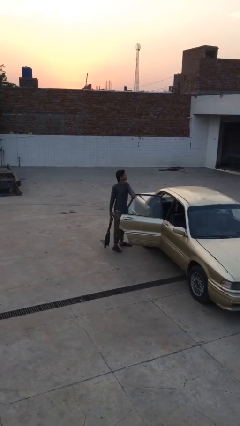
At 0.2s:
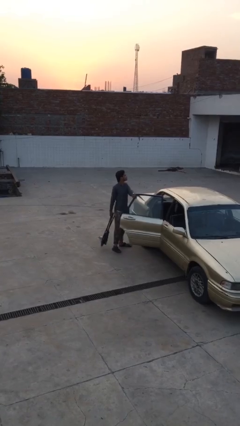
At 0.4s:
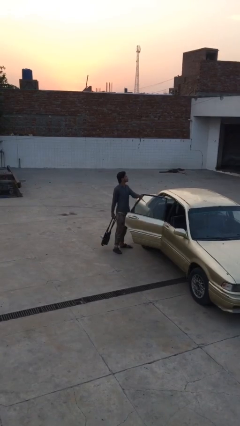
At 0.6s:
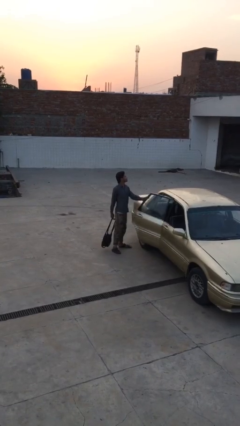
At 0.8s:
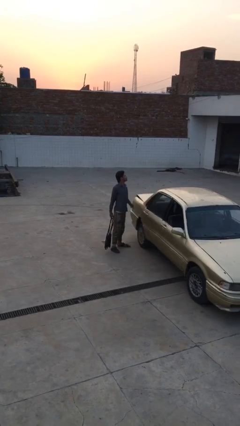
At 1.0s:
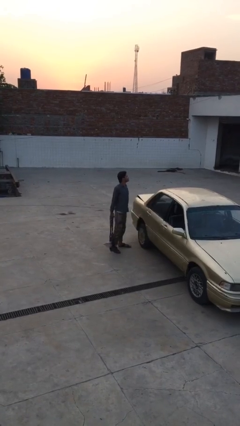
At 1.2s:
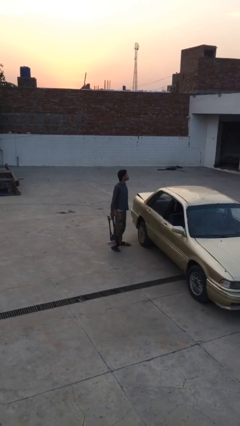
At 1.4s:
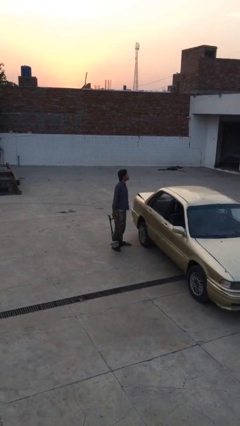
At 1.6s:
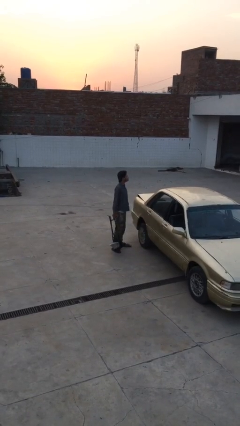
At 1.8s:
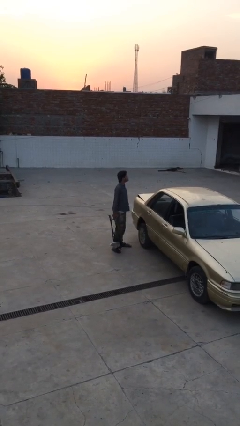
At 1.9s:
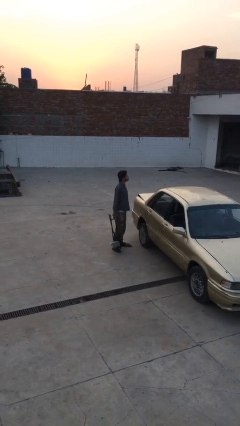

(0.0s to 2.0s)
person closes car door

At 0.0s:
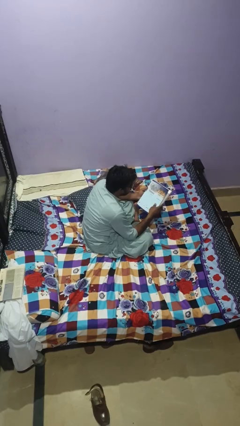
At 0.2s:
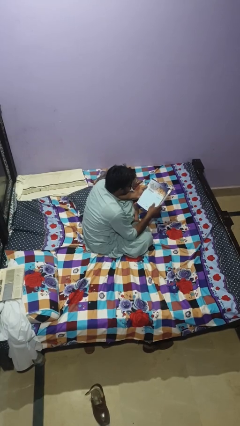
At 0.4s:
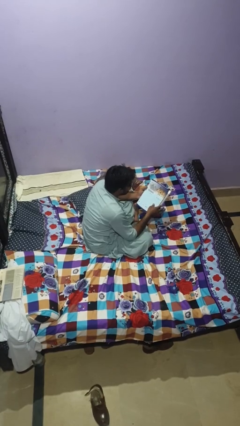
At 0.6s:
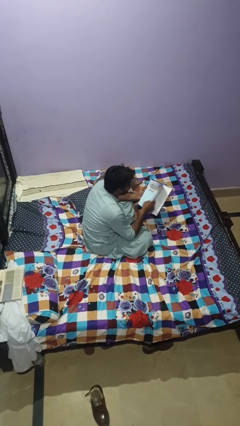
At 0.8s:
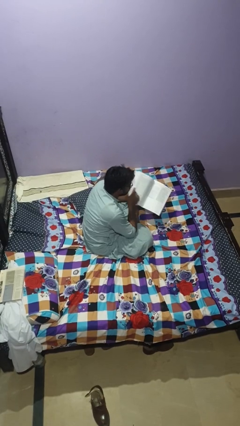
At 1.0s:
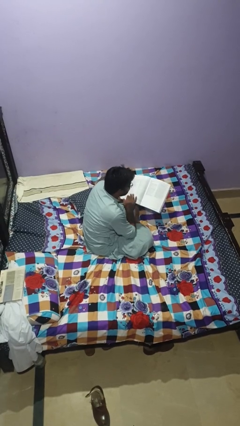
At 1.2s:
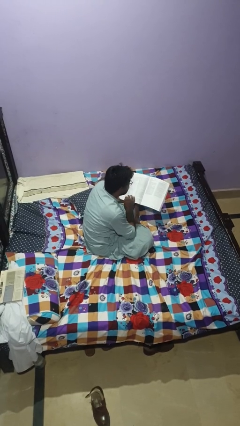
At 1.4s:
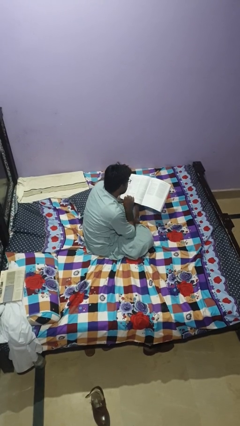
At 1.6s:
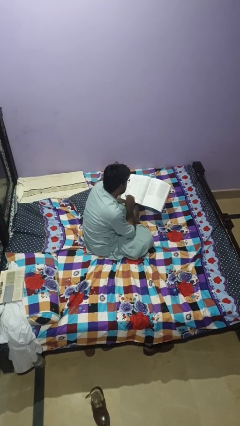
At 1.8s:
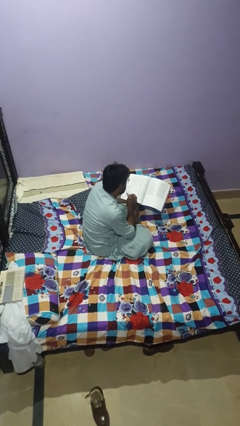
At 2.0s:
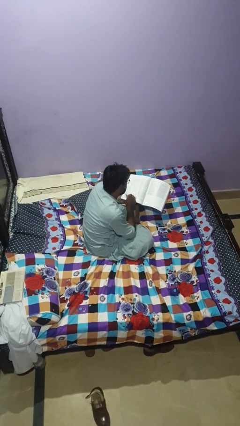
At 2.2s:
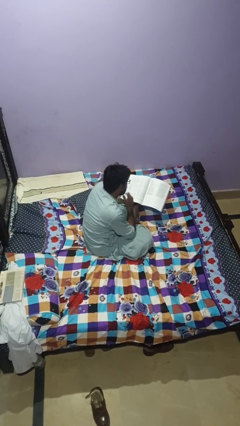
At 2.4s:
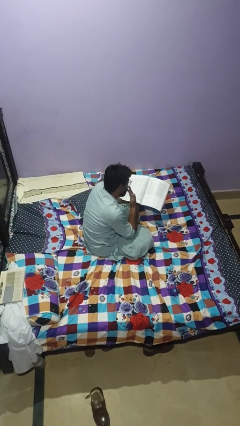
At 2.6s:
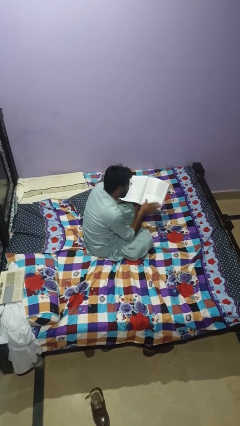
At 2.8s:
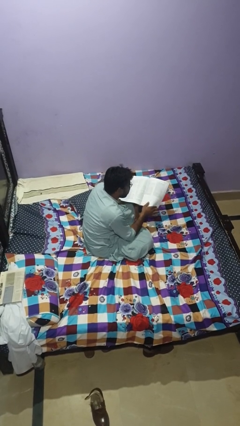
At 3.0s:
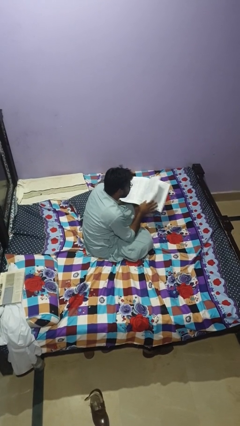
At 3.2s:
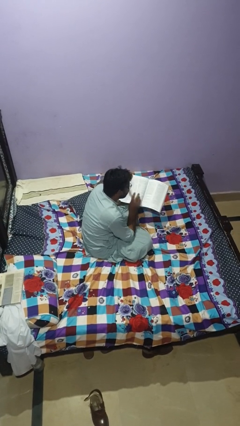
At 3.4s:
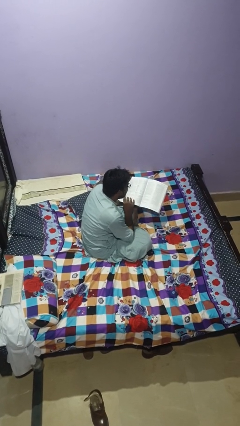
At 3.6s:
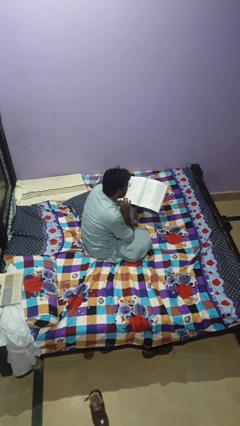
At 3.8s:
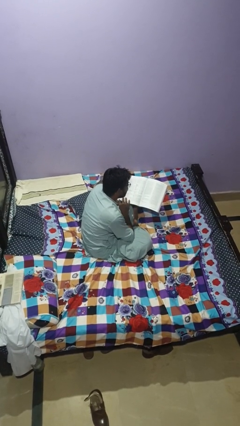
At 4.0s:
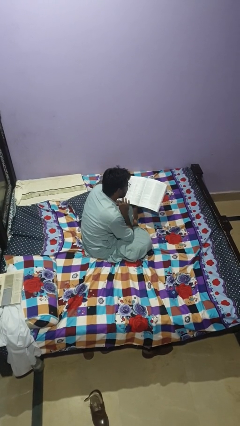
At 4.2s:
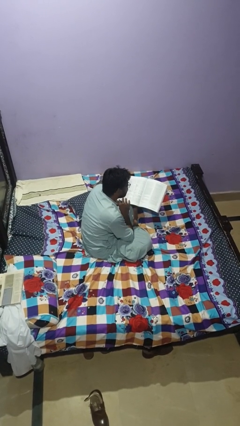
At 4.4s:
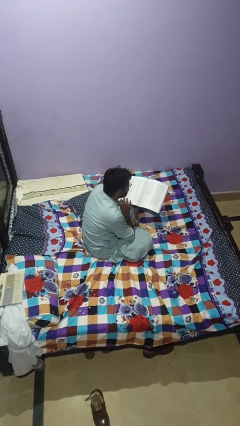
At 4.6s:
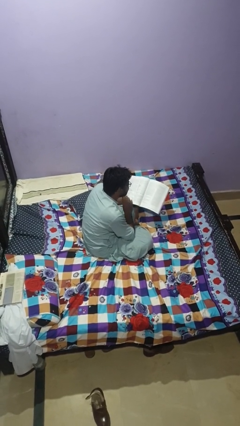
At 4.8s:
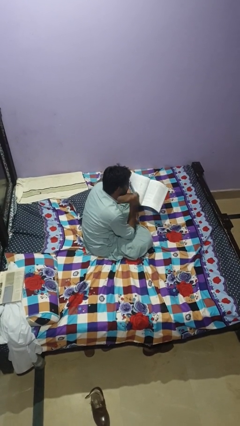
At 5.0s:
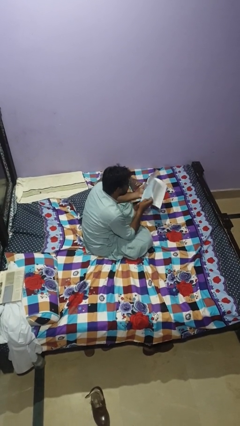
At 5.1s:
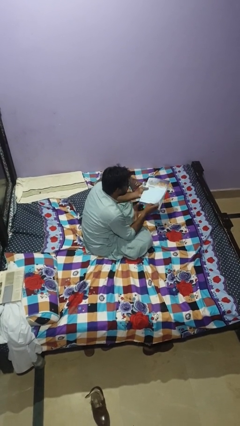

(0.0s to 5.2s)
person reads magazine

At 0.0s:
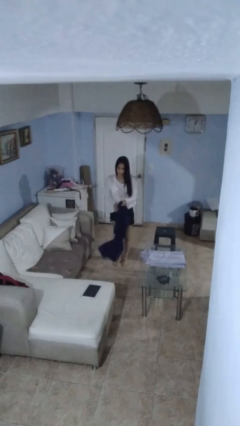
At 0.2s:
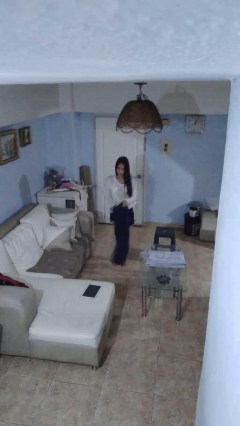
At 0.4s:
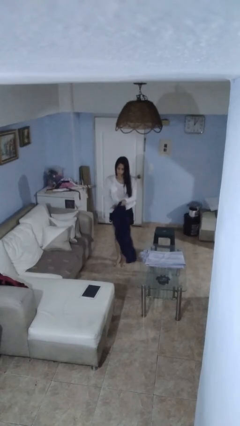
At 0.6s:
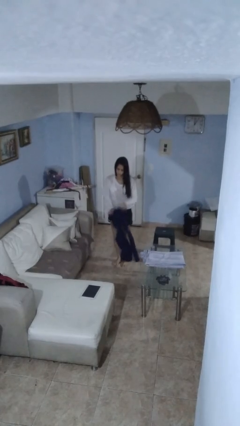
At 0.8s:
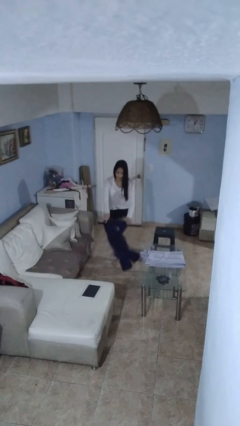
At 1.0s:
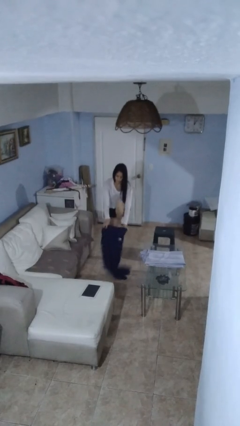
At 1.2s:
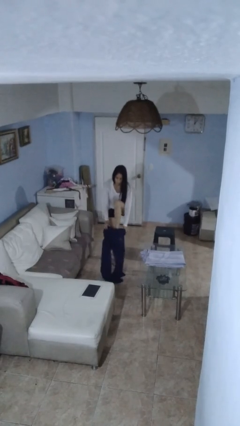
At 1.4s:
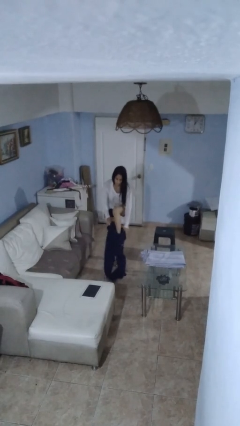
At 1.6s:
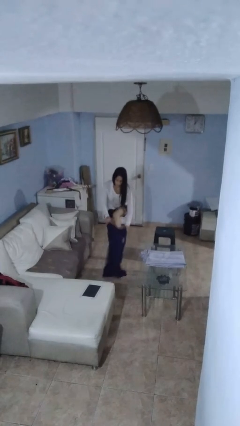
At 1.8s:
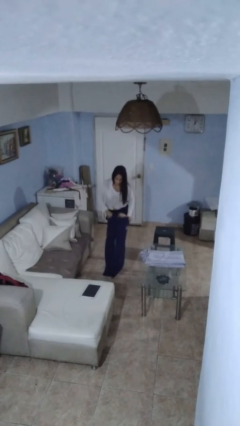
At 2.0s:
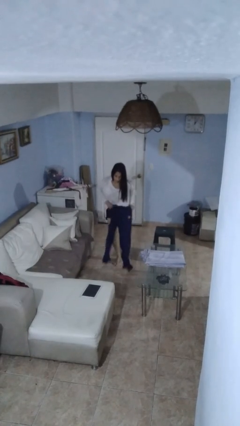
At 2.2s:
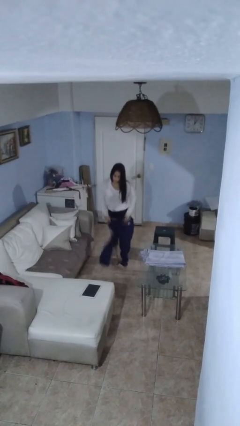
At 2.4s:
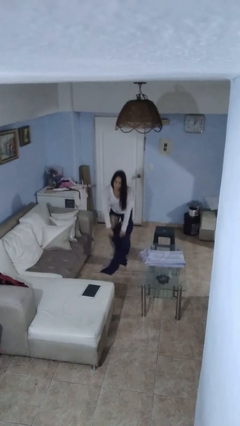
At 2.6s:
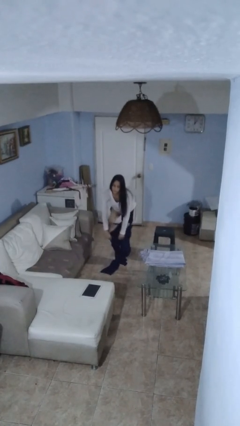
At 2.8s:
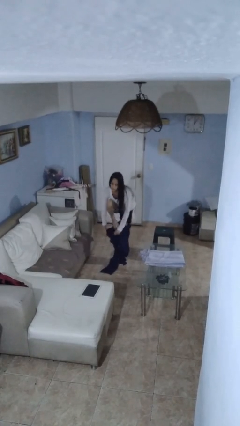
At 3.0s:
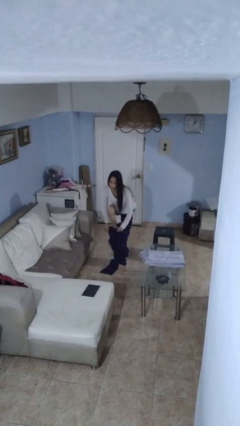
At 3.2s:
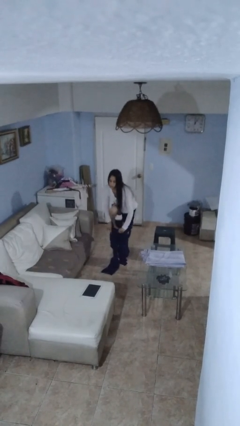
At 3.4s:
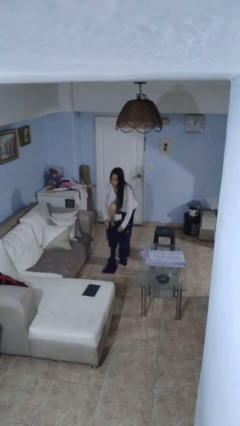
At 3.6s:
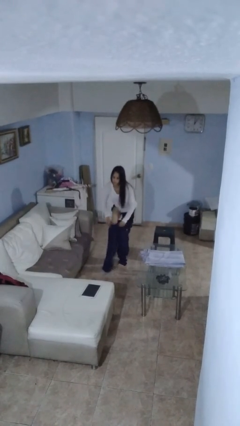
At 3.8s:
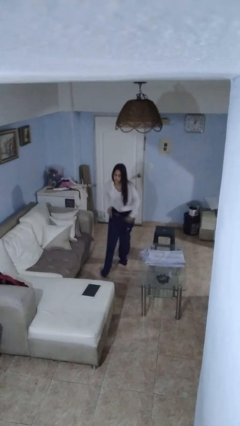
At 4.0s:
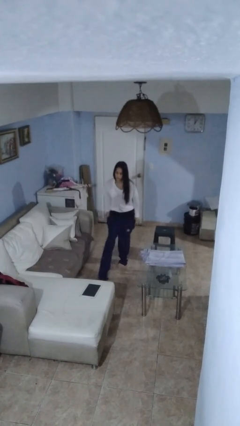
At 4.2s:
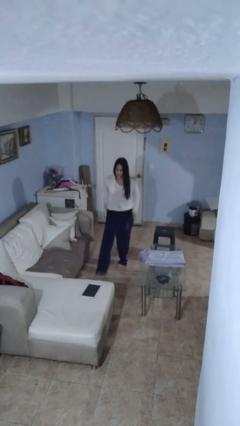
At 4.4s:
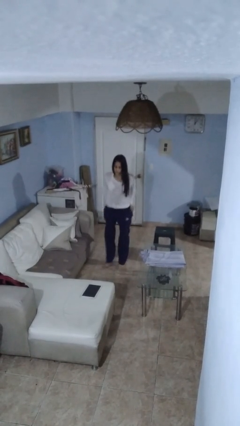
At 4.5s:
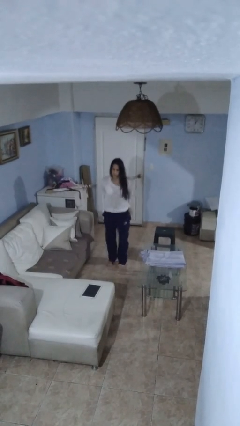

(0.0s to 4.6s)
person puts on pants

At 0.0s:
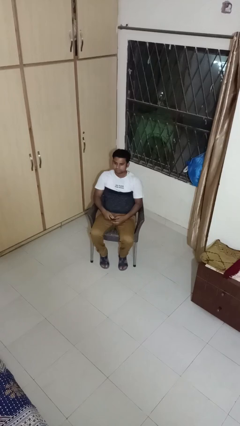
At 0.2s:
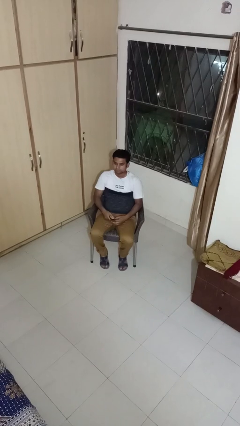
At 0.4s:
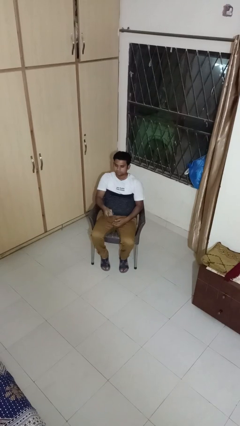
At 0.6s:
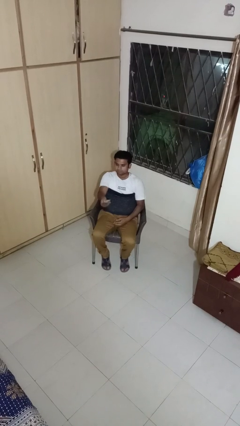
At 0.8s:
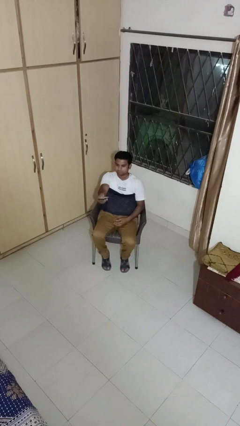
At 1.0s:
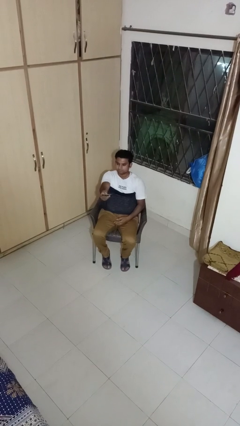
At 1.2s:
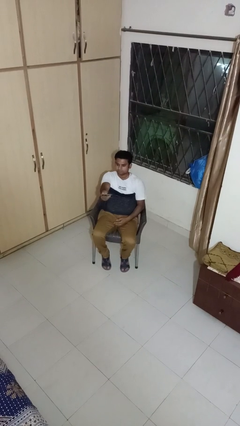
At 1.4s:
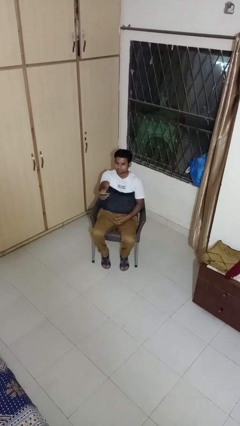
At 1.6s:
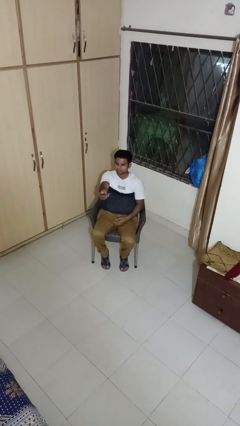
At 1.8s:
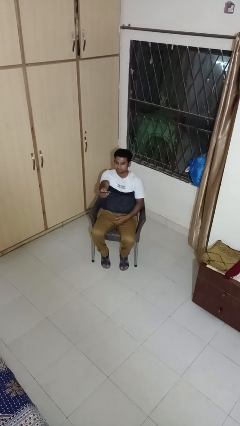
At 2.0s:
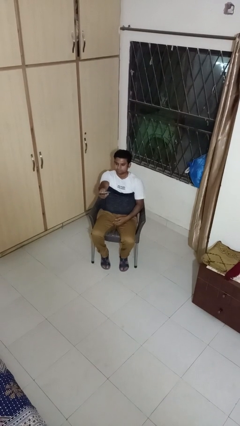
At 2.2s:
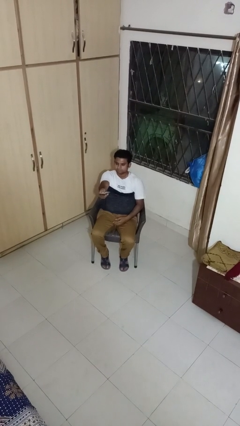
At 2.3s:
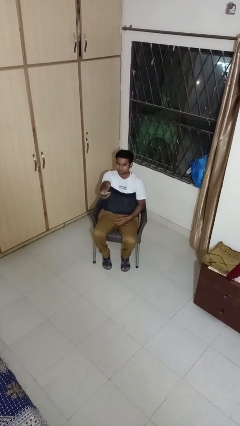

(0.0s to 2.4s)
person uses television remote

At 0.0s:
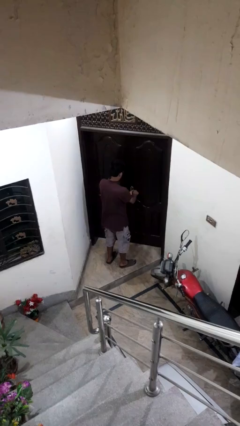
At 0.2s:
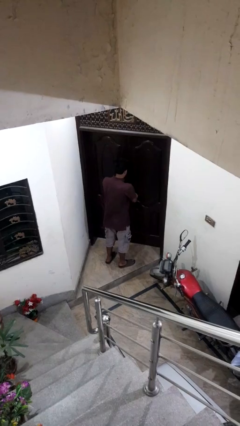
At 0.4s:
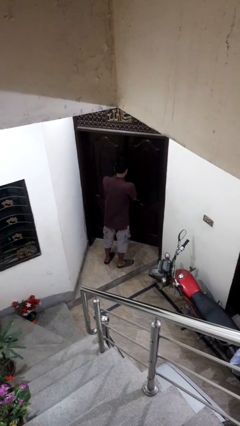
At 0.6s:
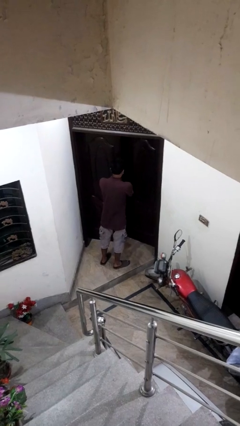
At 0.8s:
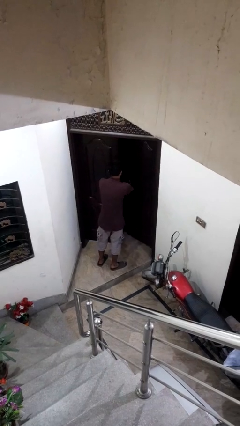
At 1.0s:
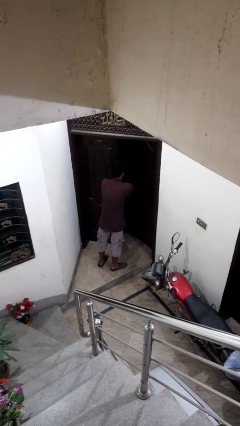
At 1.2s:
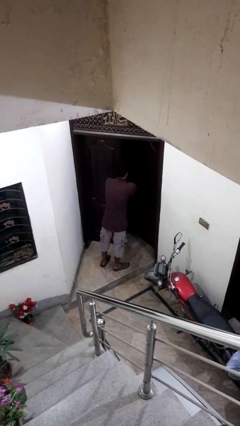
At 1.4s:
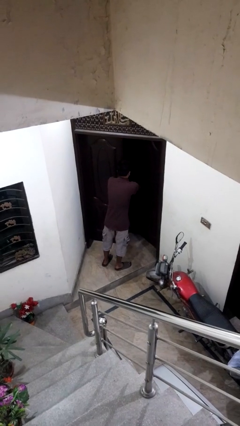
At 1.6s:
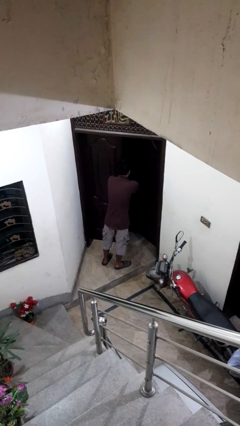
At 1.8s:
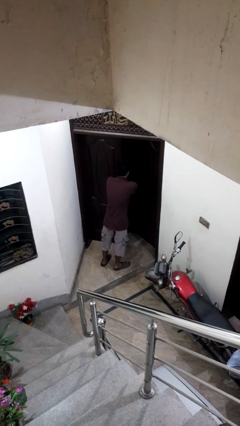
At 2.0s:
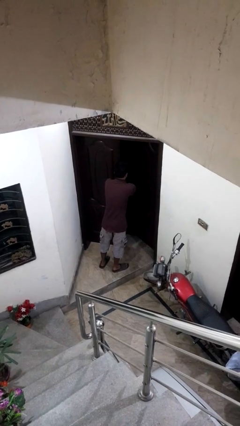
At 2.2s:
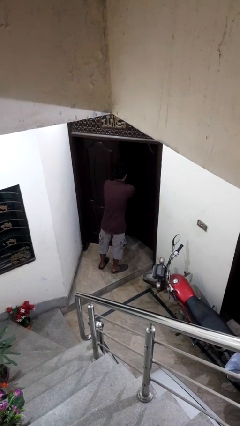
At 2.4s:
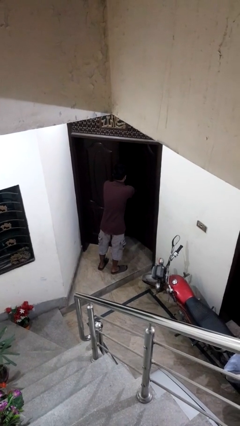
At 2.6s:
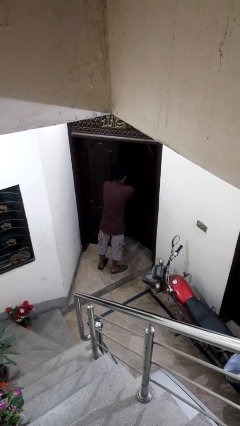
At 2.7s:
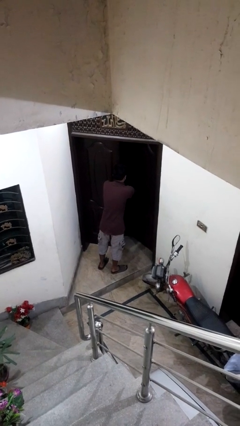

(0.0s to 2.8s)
person opens facility door

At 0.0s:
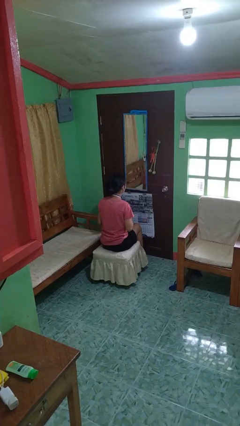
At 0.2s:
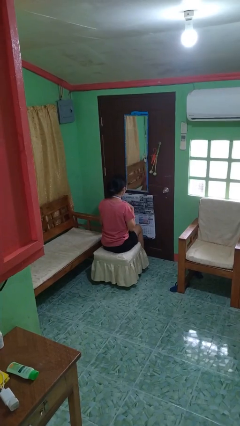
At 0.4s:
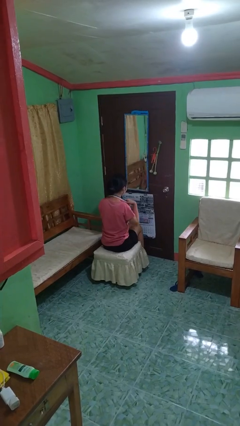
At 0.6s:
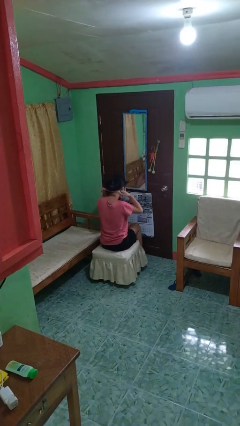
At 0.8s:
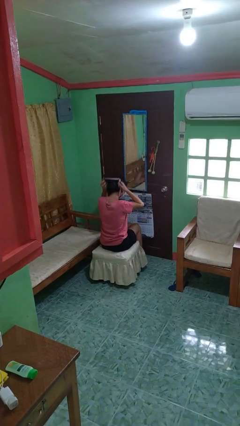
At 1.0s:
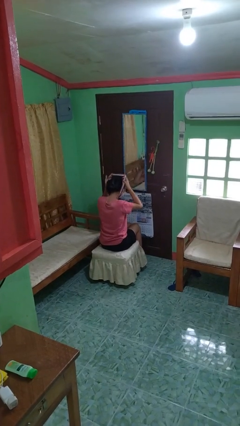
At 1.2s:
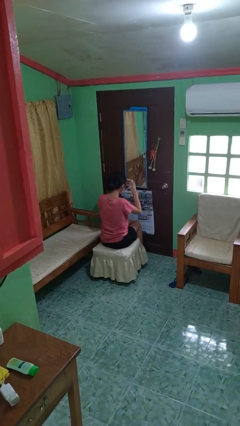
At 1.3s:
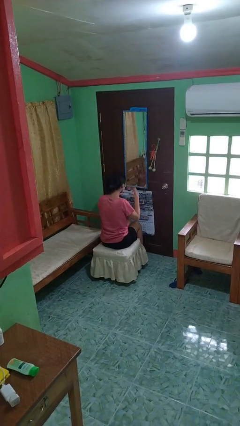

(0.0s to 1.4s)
person takes off necklace
